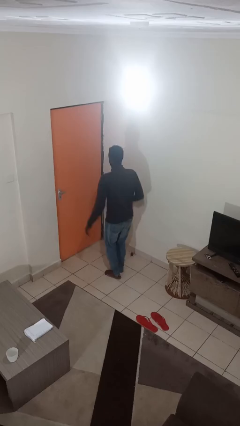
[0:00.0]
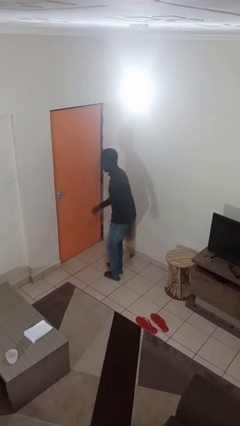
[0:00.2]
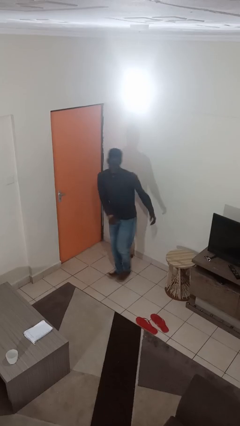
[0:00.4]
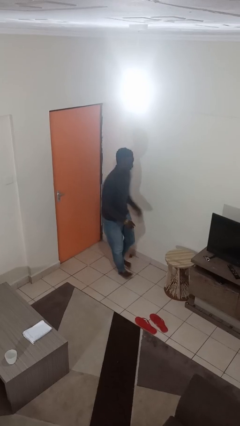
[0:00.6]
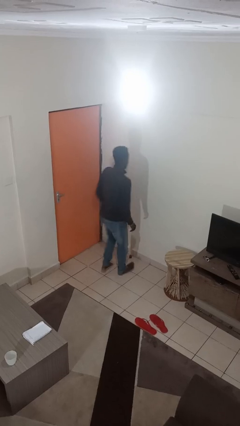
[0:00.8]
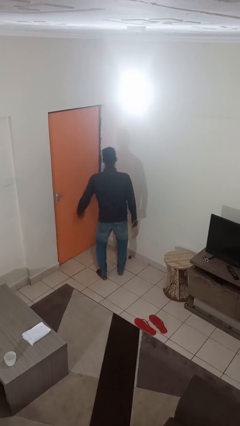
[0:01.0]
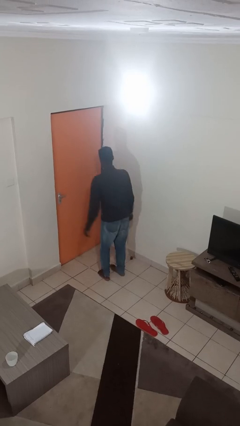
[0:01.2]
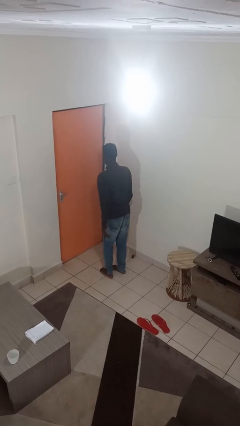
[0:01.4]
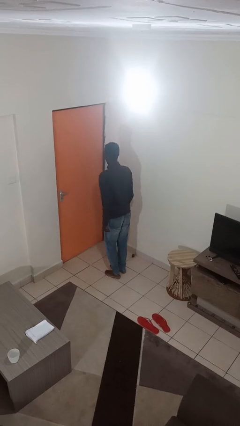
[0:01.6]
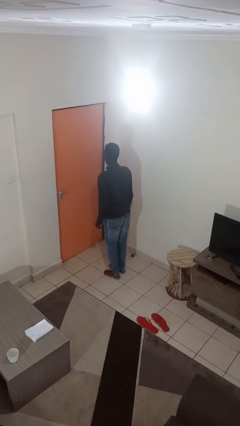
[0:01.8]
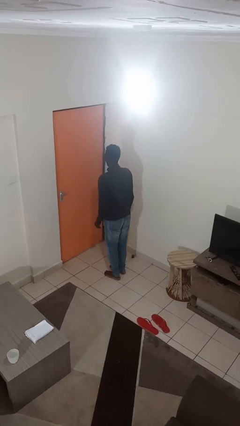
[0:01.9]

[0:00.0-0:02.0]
person twirls

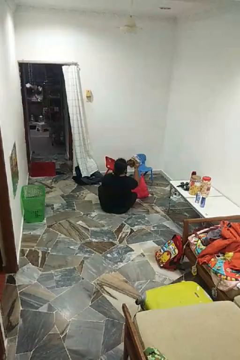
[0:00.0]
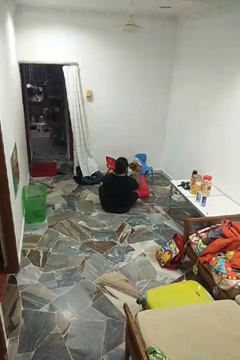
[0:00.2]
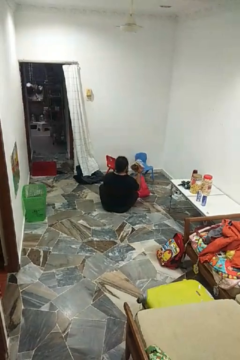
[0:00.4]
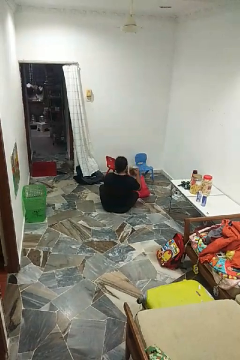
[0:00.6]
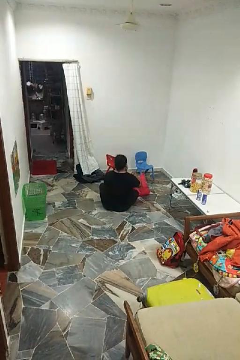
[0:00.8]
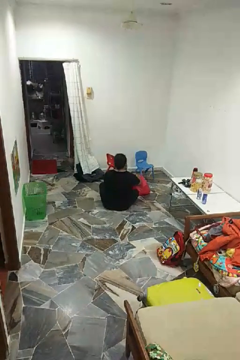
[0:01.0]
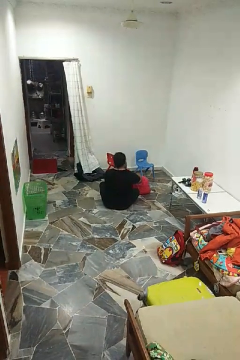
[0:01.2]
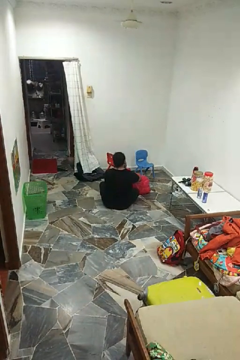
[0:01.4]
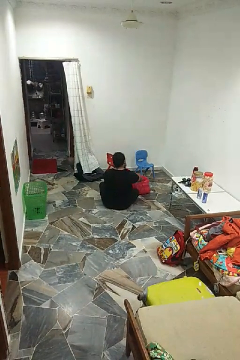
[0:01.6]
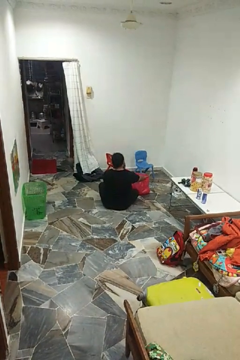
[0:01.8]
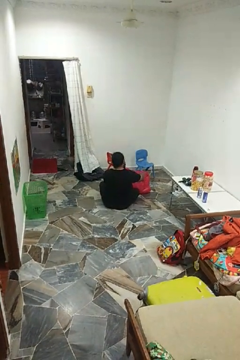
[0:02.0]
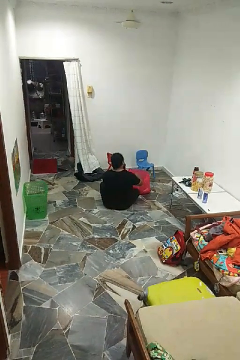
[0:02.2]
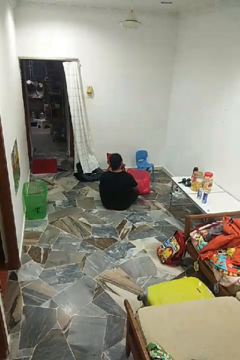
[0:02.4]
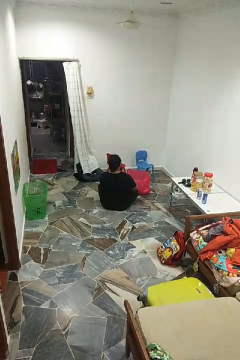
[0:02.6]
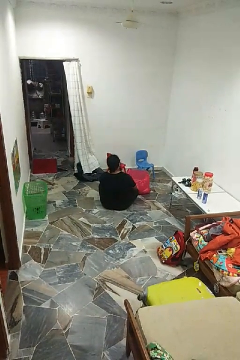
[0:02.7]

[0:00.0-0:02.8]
person puts object into bag

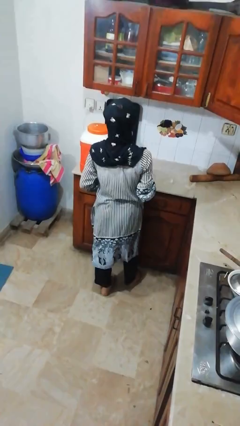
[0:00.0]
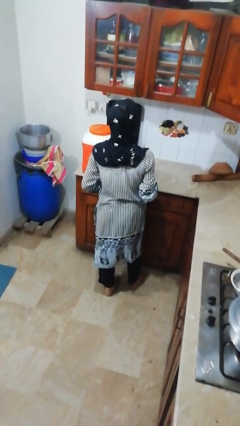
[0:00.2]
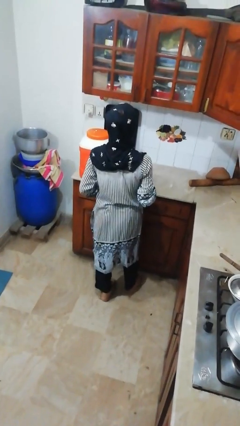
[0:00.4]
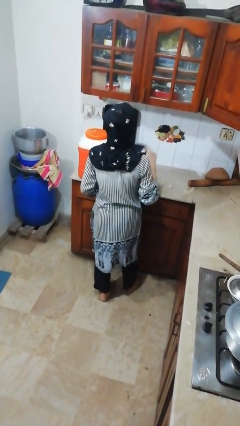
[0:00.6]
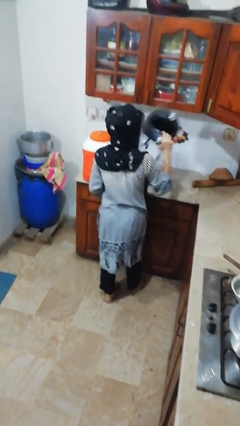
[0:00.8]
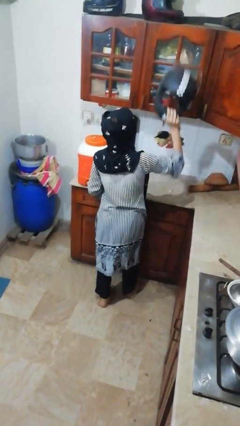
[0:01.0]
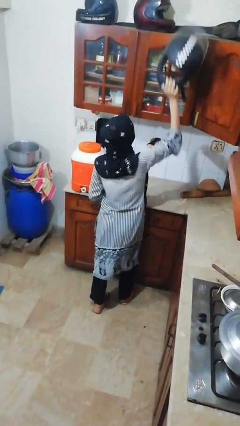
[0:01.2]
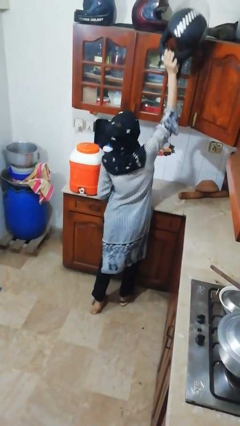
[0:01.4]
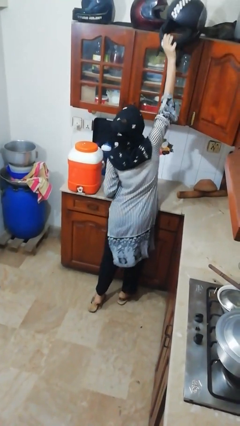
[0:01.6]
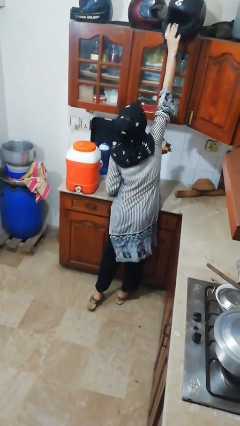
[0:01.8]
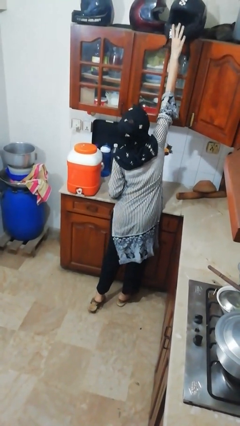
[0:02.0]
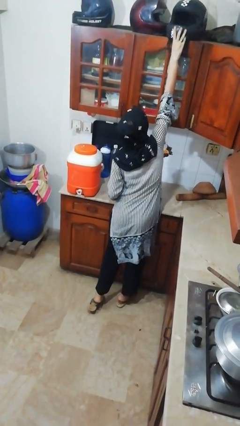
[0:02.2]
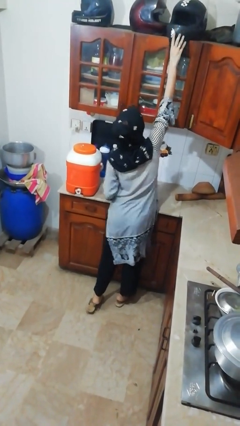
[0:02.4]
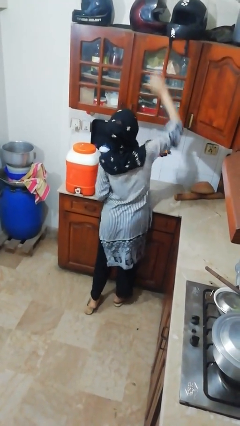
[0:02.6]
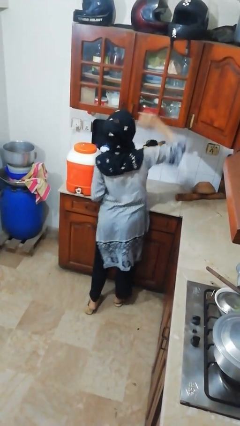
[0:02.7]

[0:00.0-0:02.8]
person puts down object on shelf

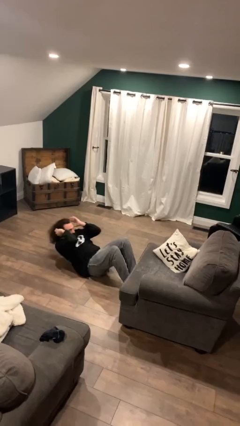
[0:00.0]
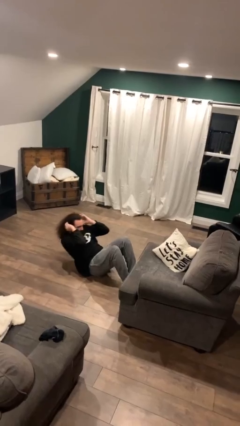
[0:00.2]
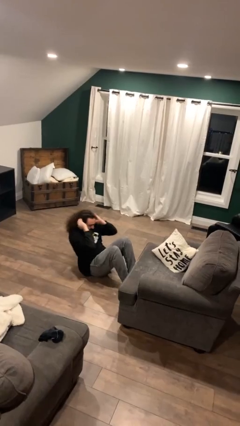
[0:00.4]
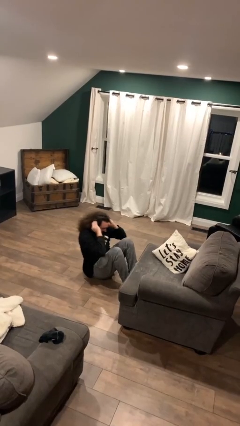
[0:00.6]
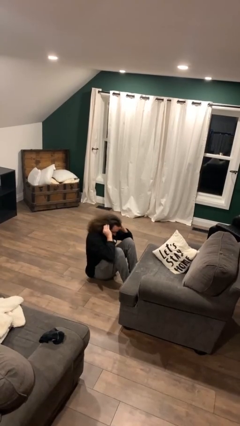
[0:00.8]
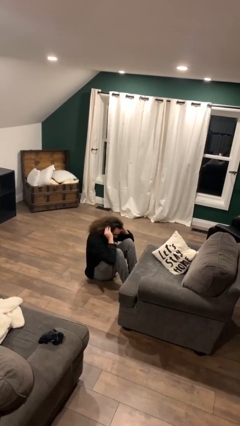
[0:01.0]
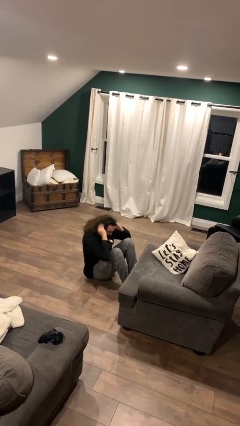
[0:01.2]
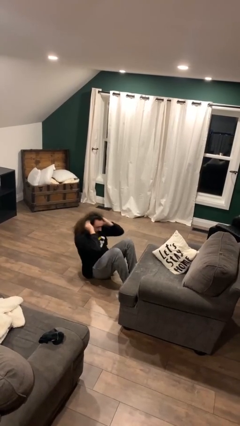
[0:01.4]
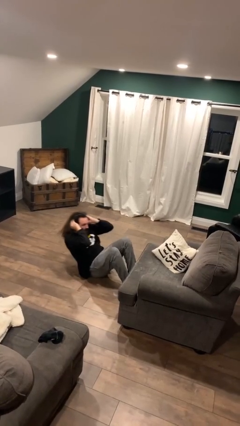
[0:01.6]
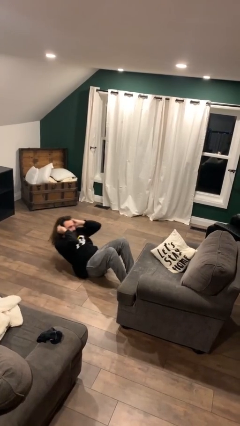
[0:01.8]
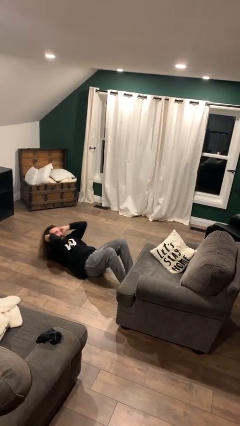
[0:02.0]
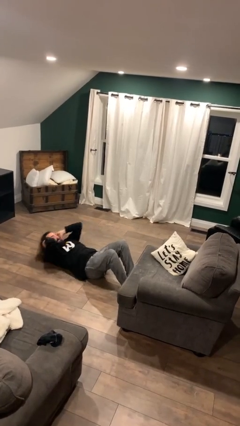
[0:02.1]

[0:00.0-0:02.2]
person exercises with situp

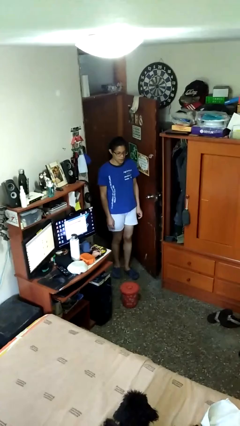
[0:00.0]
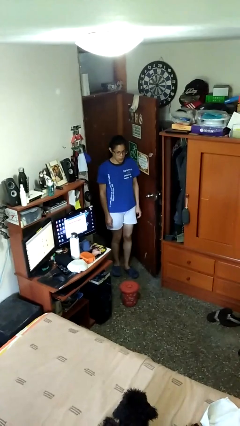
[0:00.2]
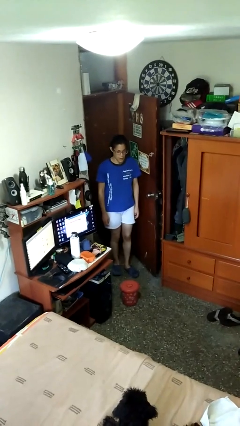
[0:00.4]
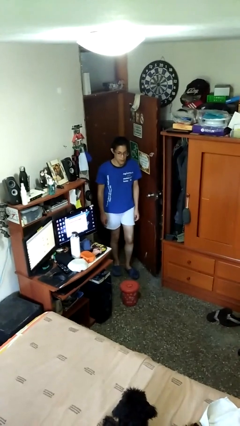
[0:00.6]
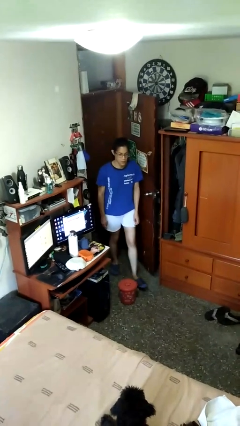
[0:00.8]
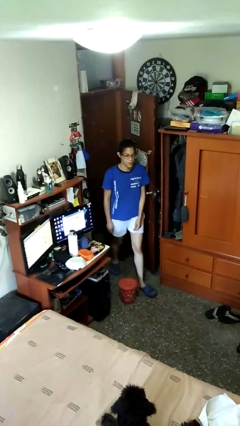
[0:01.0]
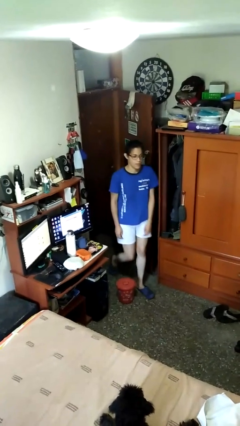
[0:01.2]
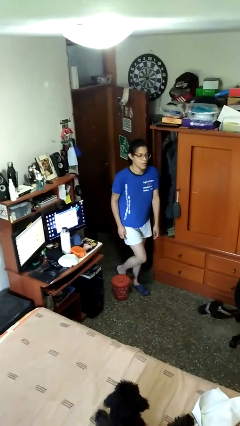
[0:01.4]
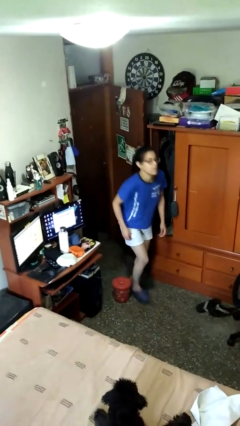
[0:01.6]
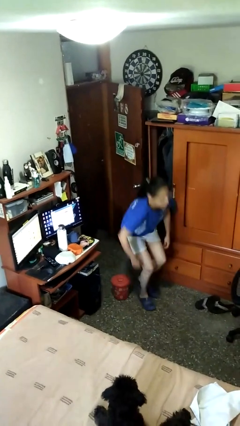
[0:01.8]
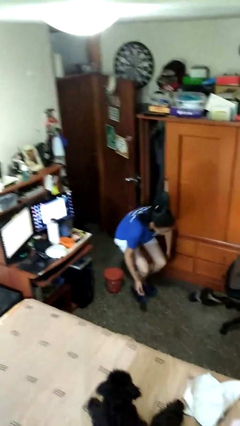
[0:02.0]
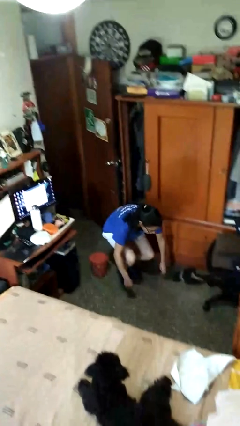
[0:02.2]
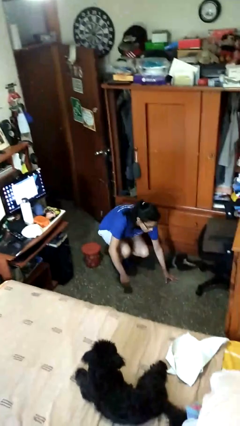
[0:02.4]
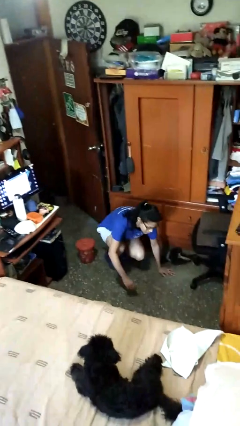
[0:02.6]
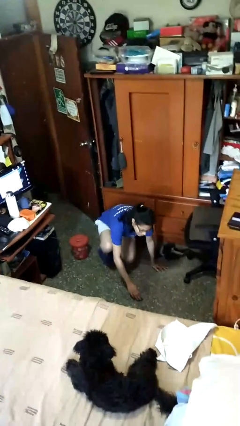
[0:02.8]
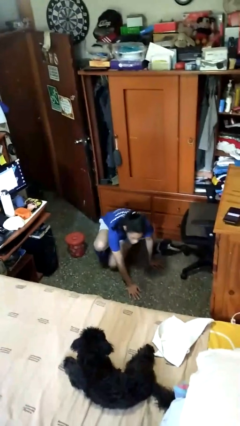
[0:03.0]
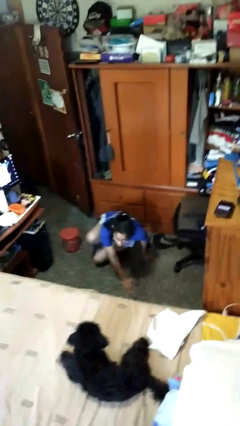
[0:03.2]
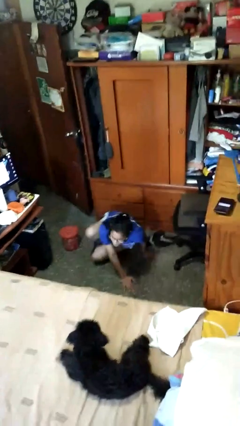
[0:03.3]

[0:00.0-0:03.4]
person trips on object on floor

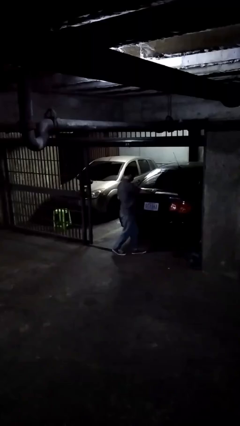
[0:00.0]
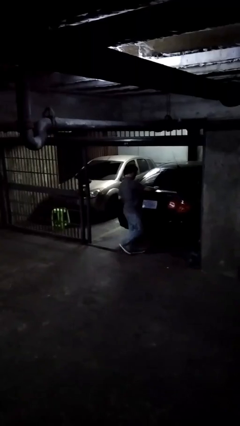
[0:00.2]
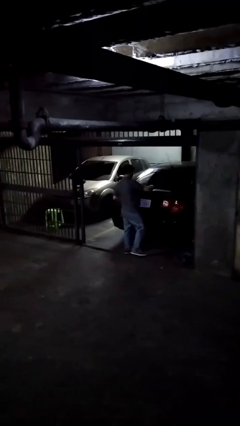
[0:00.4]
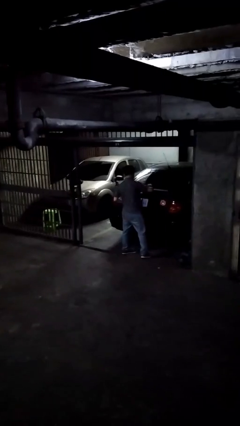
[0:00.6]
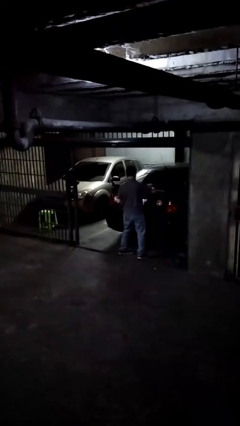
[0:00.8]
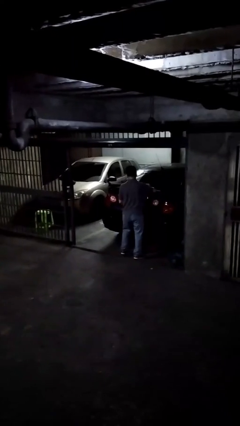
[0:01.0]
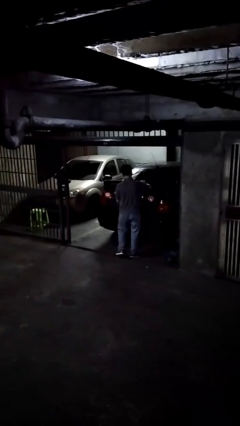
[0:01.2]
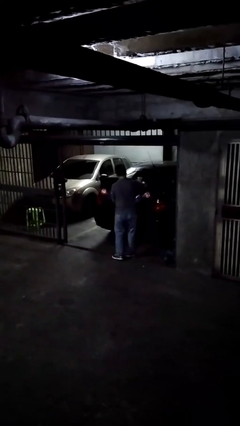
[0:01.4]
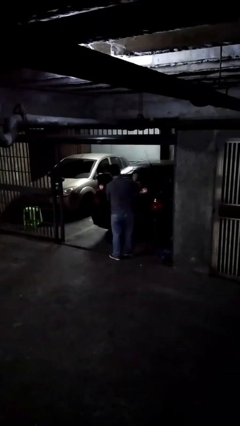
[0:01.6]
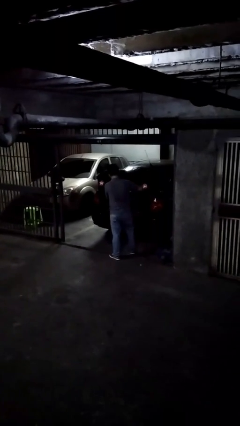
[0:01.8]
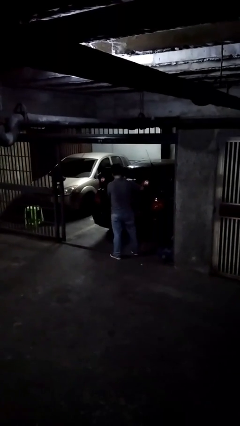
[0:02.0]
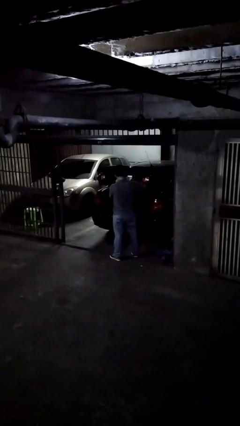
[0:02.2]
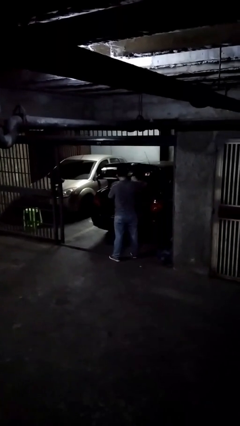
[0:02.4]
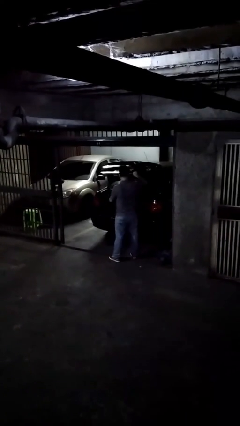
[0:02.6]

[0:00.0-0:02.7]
person opens car trunk

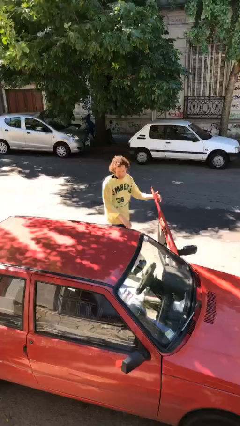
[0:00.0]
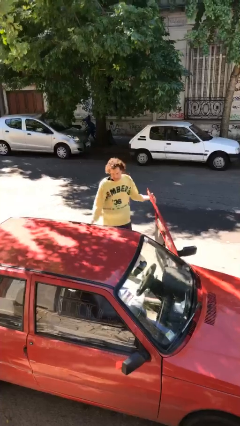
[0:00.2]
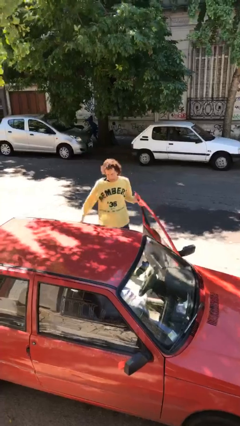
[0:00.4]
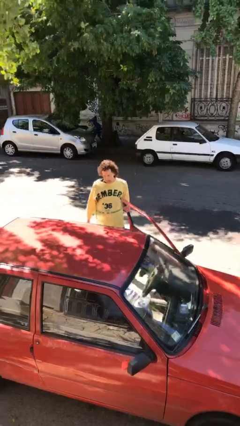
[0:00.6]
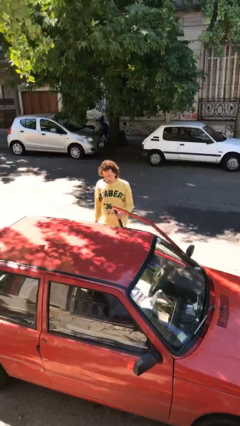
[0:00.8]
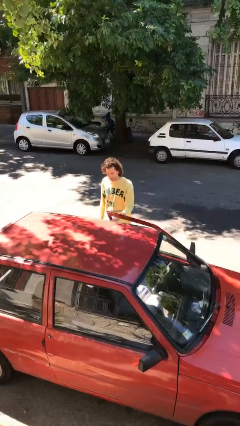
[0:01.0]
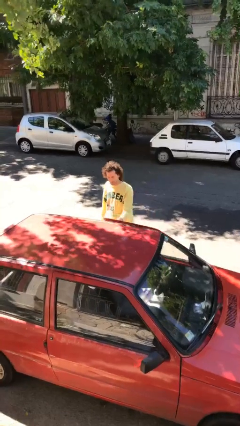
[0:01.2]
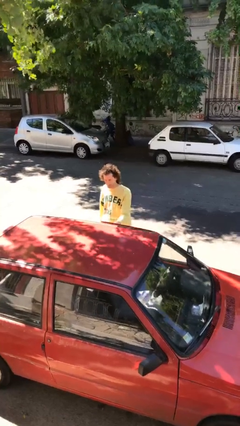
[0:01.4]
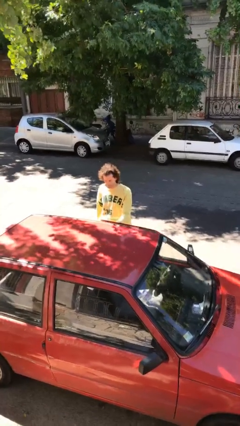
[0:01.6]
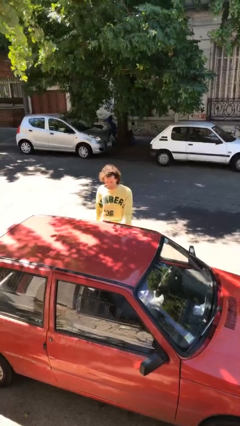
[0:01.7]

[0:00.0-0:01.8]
person closes car door
